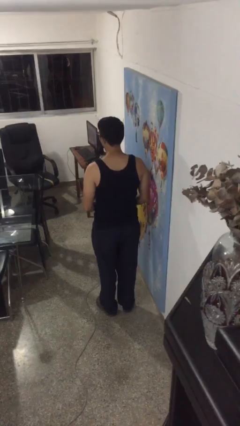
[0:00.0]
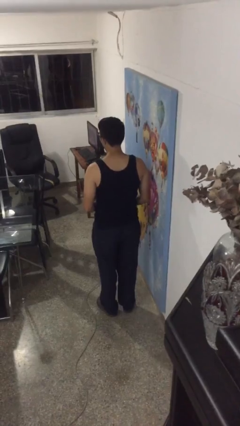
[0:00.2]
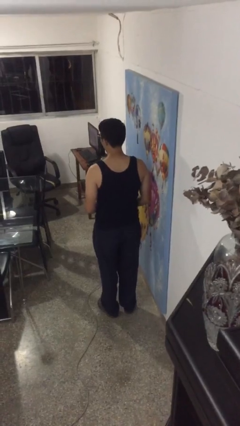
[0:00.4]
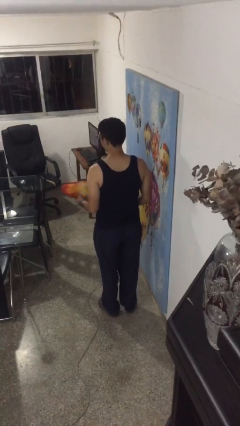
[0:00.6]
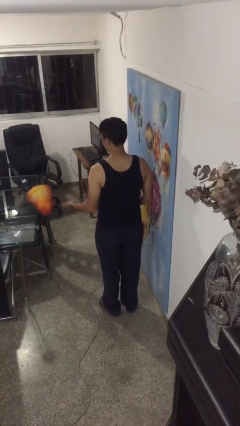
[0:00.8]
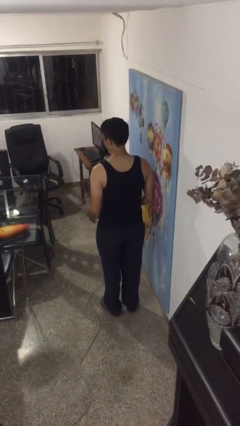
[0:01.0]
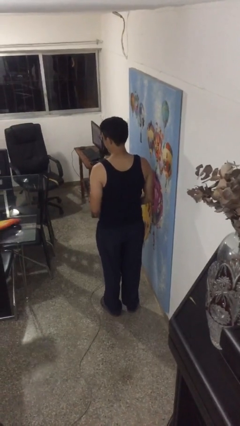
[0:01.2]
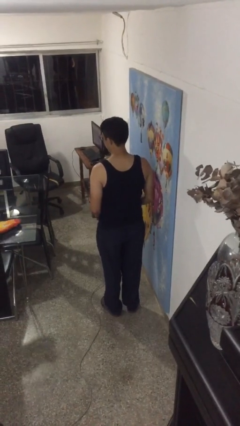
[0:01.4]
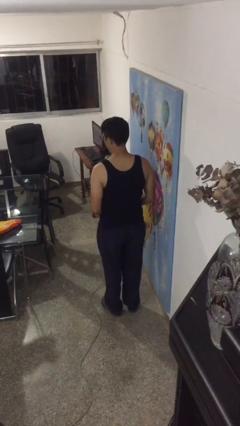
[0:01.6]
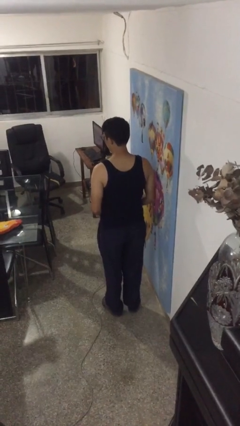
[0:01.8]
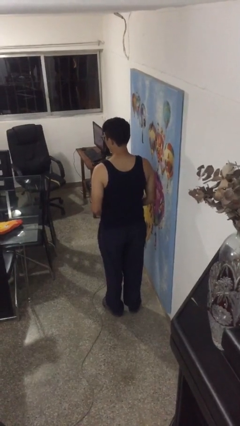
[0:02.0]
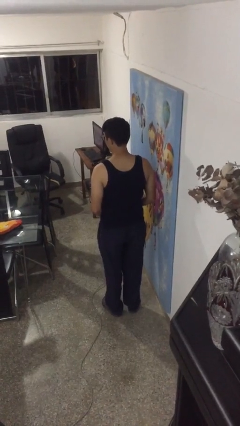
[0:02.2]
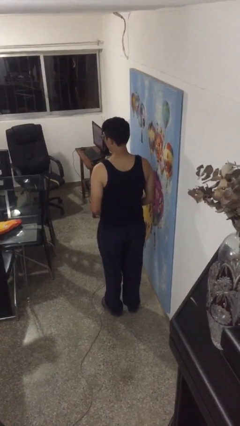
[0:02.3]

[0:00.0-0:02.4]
person throws object on table

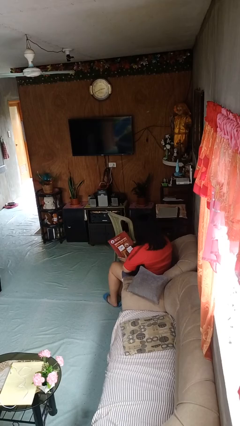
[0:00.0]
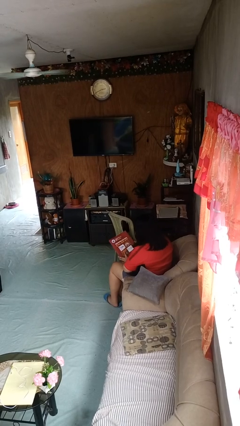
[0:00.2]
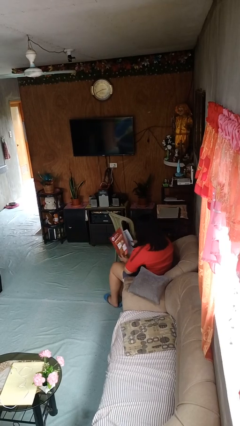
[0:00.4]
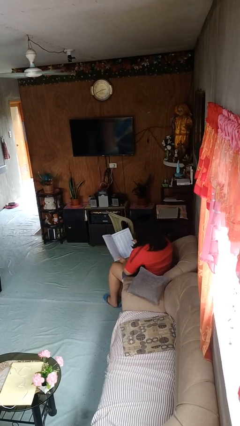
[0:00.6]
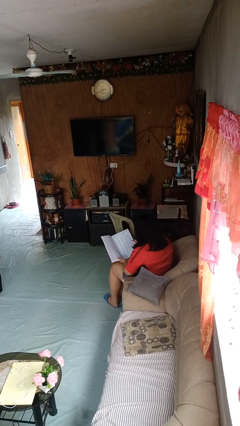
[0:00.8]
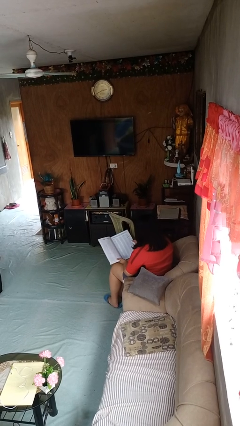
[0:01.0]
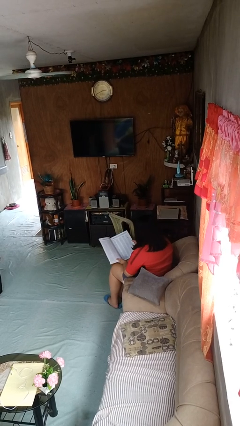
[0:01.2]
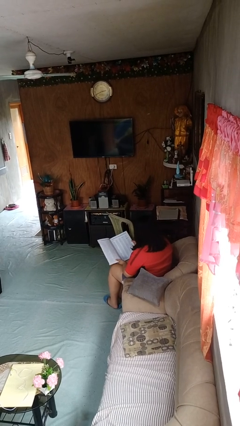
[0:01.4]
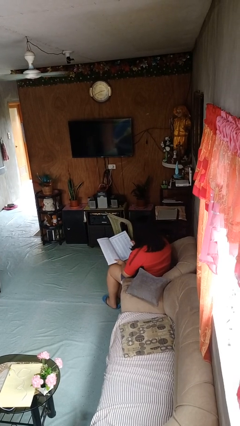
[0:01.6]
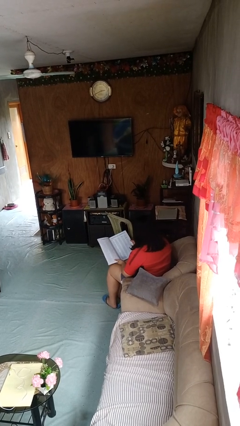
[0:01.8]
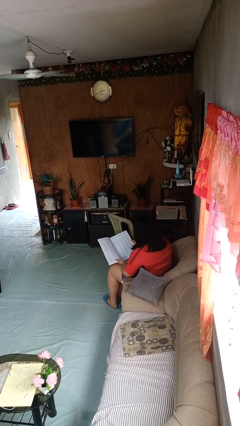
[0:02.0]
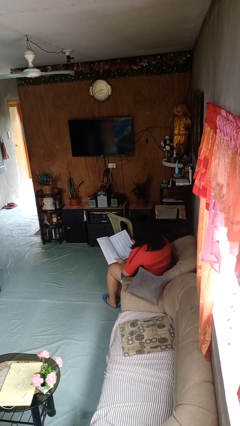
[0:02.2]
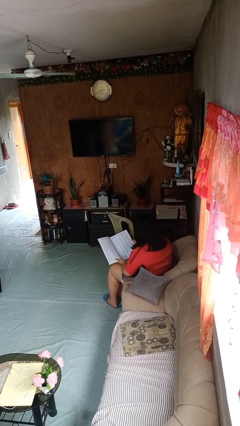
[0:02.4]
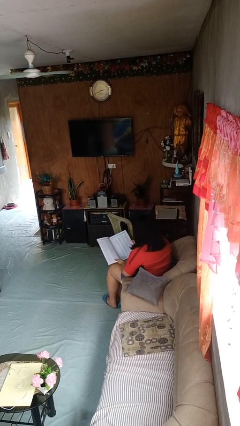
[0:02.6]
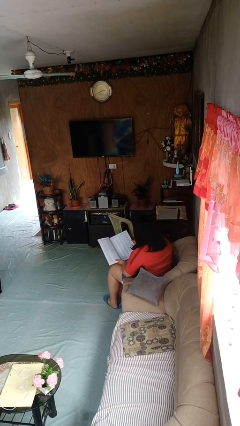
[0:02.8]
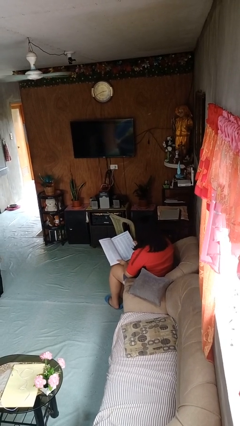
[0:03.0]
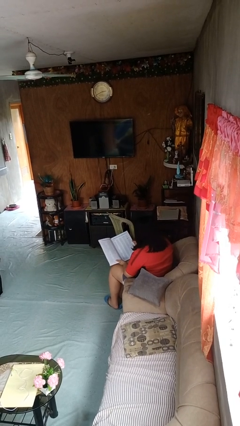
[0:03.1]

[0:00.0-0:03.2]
person reads magazine

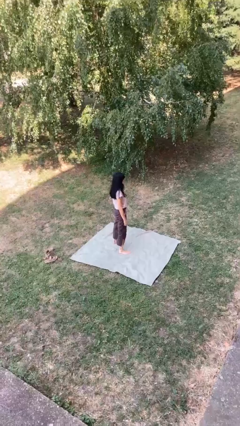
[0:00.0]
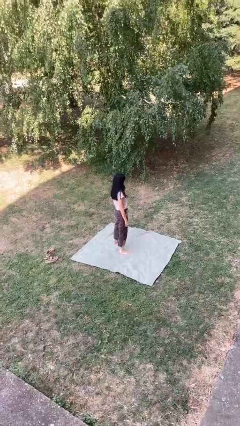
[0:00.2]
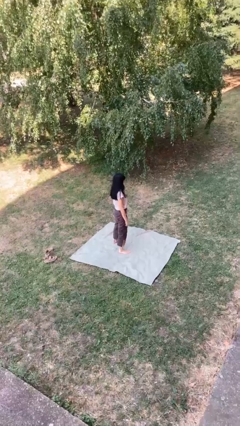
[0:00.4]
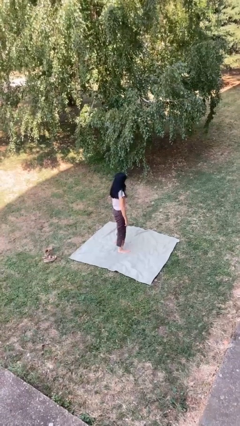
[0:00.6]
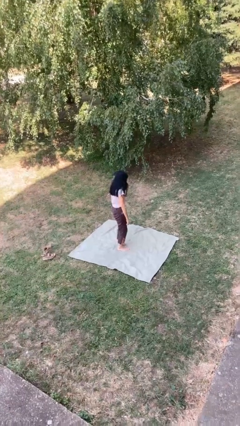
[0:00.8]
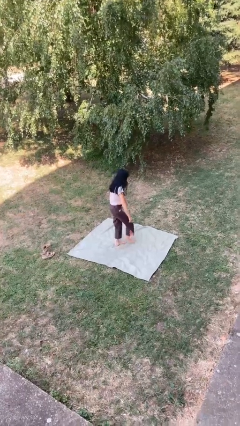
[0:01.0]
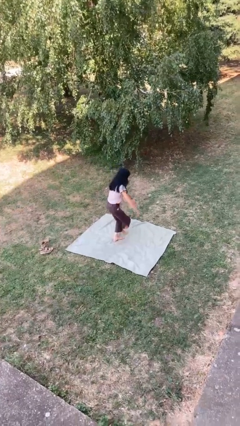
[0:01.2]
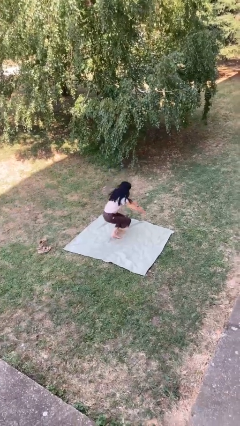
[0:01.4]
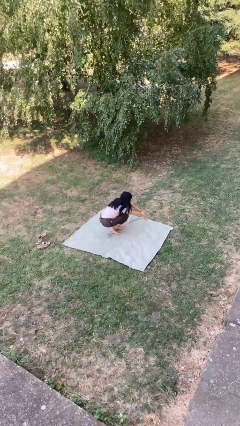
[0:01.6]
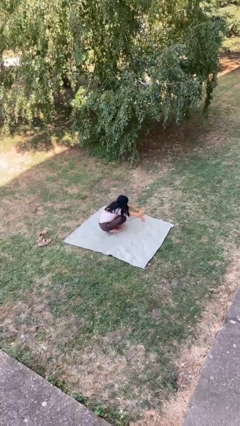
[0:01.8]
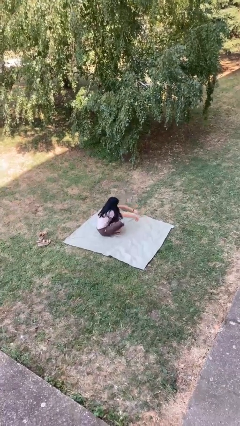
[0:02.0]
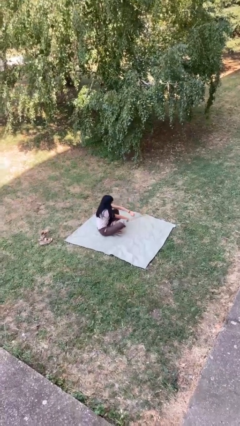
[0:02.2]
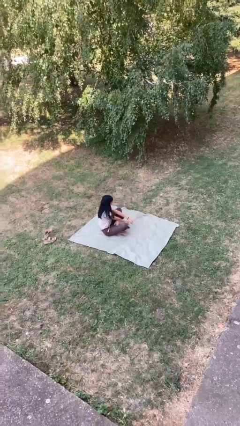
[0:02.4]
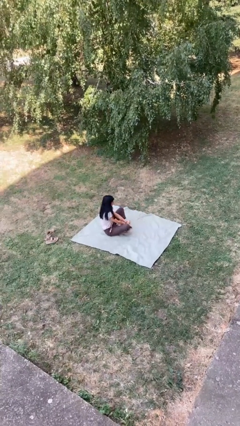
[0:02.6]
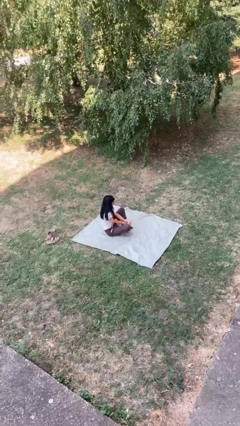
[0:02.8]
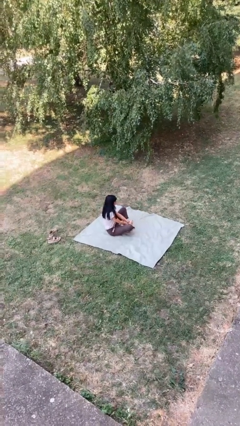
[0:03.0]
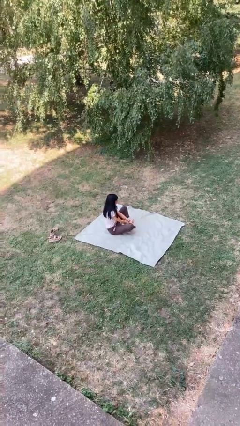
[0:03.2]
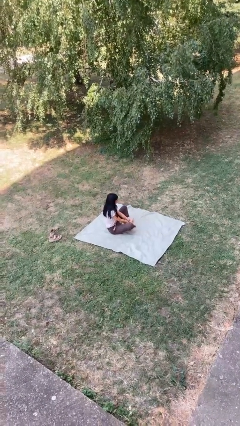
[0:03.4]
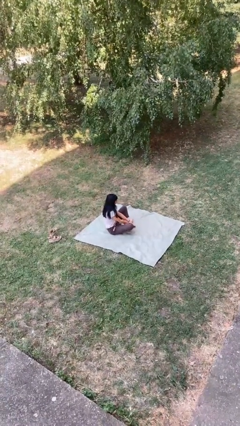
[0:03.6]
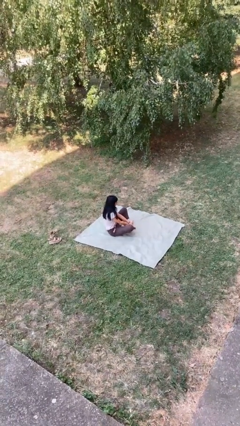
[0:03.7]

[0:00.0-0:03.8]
person sits crisscross

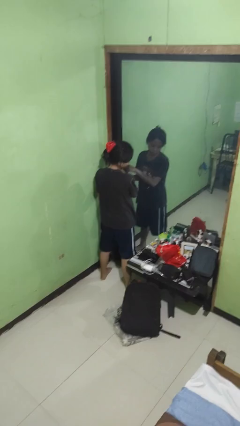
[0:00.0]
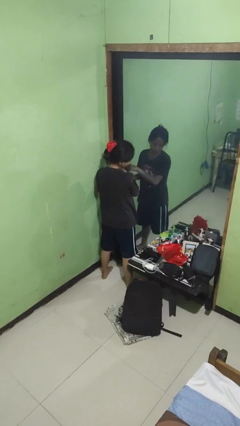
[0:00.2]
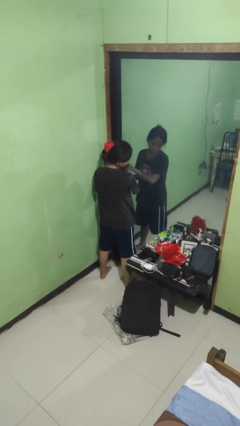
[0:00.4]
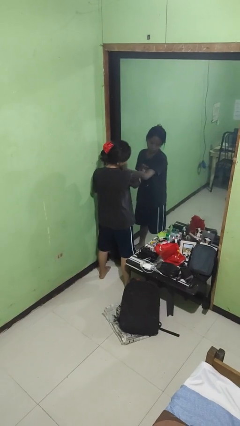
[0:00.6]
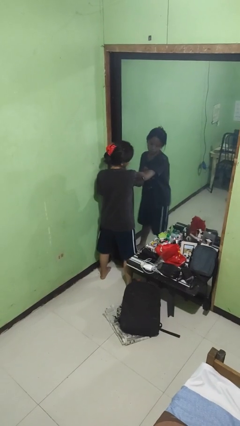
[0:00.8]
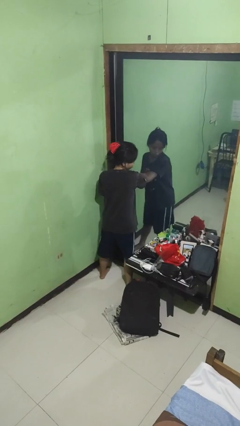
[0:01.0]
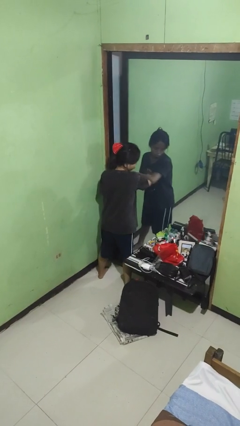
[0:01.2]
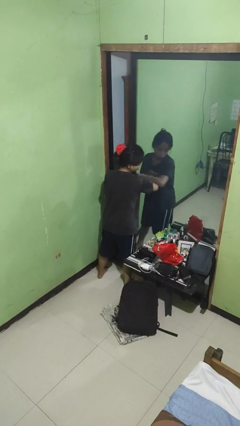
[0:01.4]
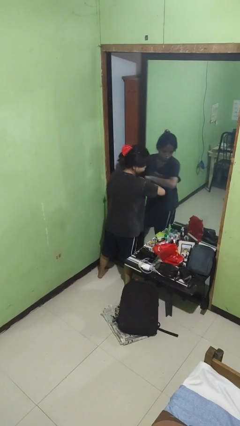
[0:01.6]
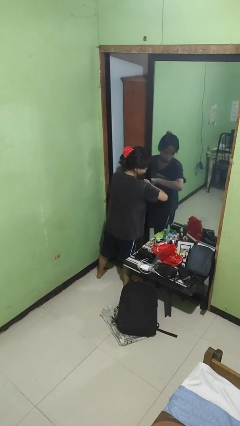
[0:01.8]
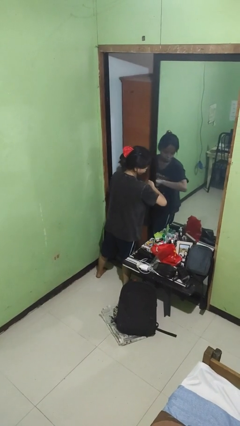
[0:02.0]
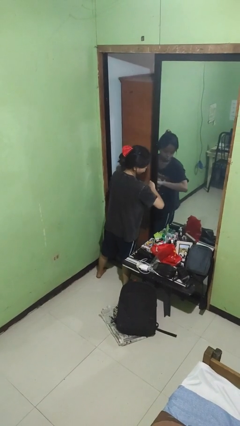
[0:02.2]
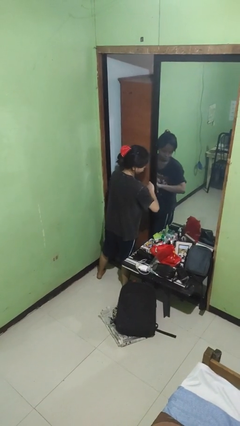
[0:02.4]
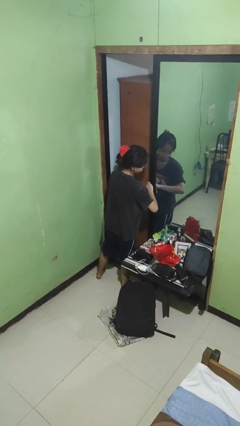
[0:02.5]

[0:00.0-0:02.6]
person opens sliding door

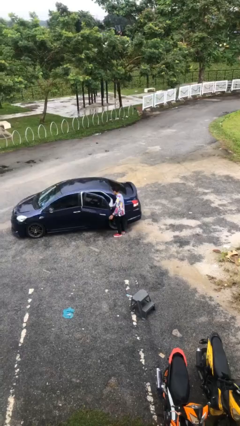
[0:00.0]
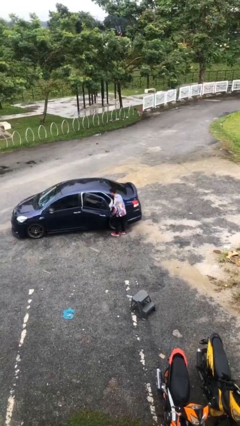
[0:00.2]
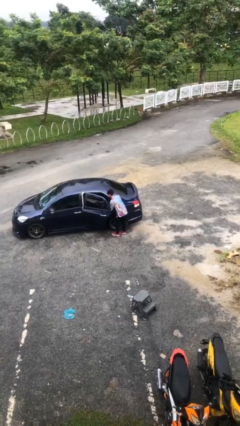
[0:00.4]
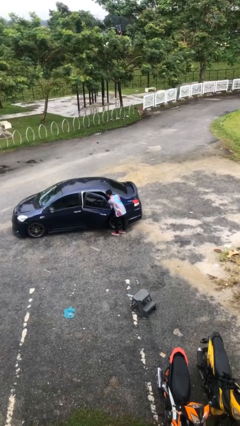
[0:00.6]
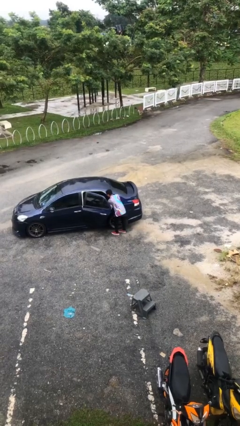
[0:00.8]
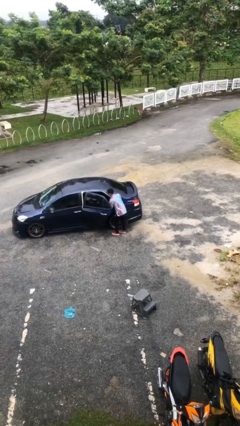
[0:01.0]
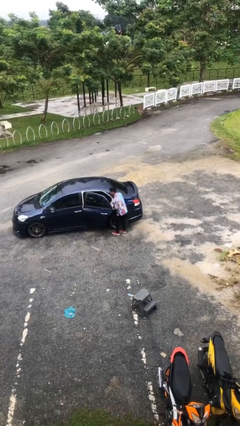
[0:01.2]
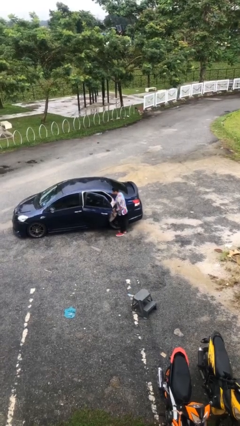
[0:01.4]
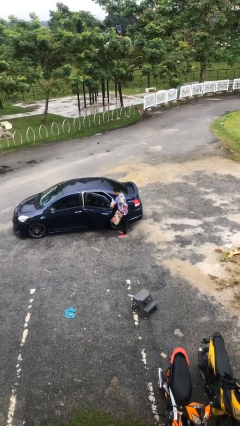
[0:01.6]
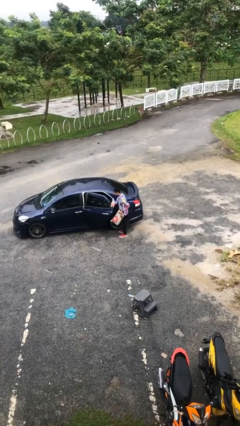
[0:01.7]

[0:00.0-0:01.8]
person unloads car

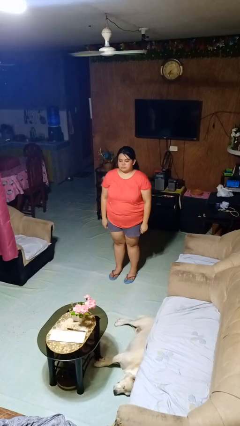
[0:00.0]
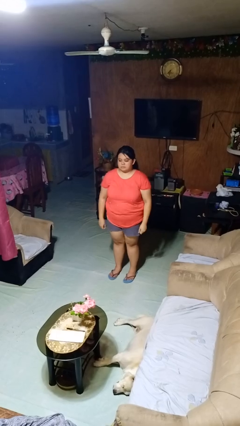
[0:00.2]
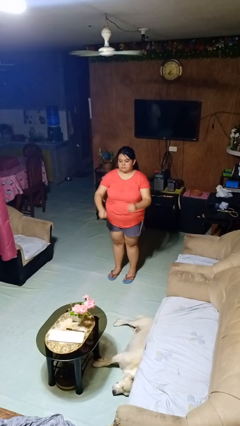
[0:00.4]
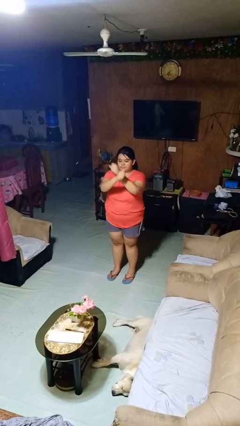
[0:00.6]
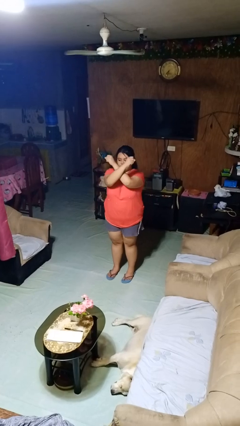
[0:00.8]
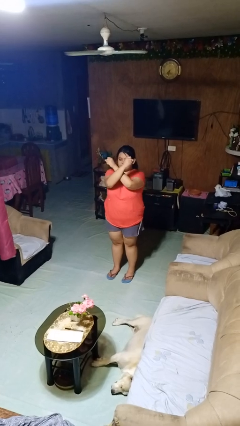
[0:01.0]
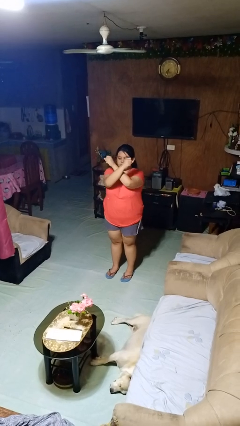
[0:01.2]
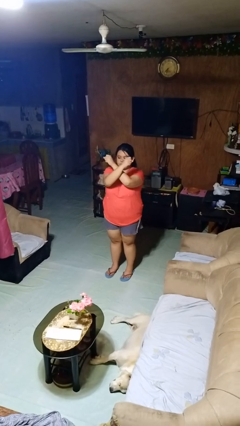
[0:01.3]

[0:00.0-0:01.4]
person gestures arms x

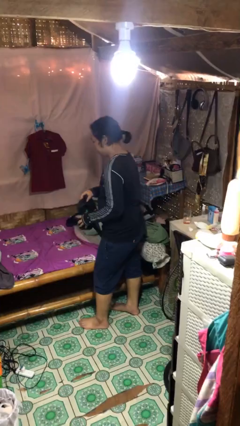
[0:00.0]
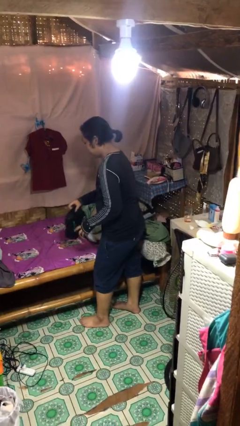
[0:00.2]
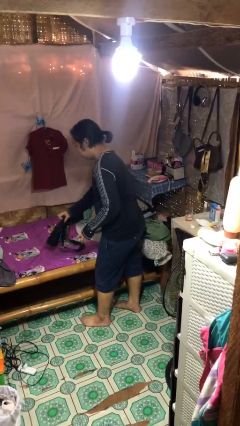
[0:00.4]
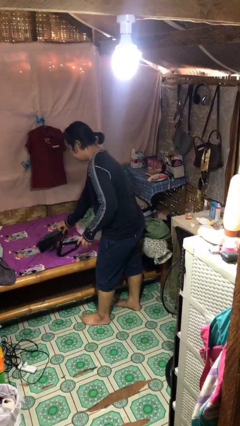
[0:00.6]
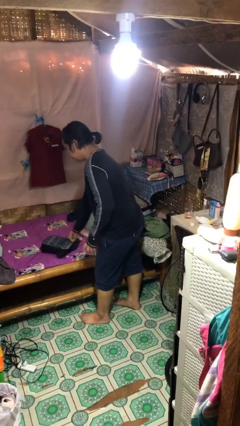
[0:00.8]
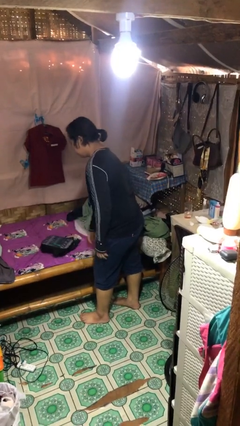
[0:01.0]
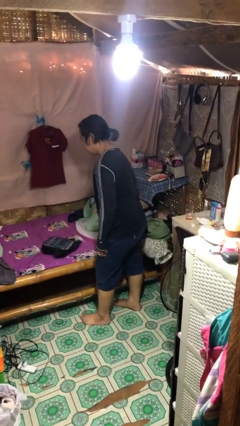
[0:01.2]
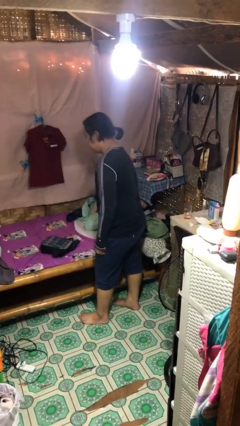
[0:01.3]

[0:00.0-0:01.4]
person puts down object on bed

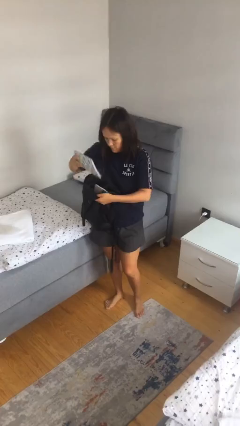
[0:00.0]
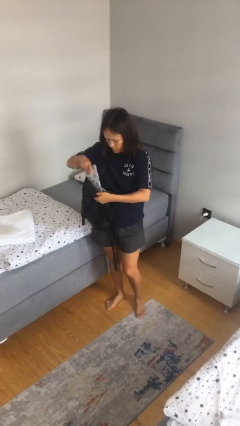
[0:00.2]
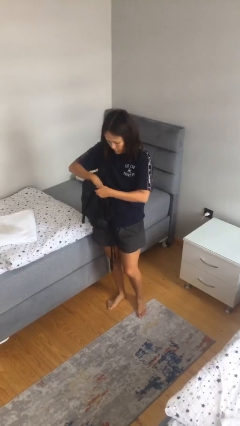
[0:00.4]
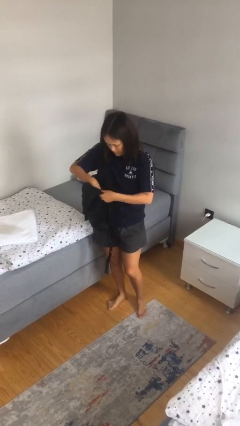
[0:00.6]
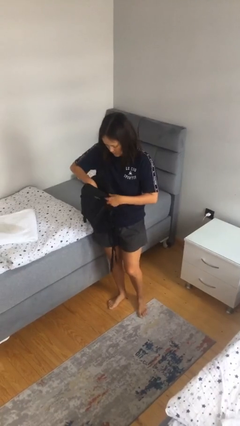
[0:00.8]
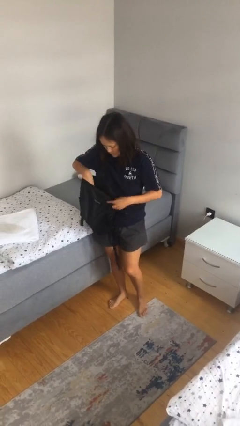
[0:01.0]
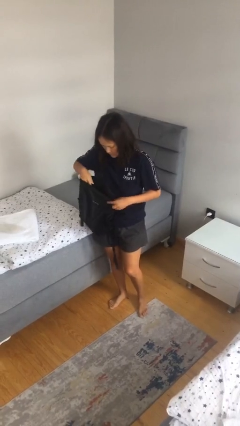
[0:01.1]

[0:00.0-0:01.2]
person puts object into backpack
